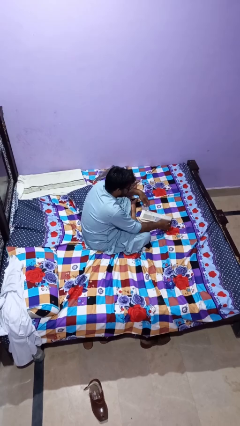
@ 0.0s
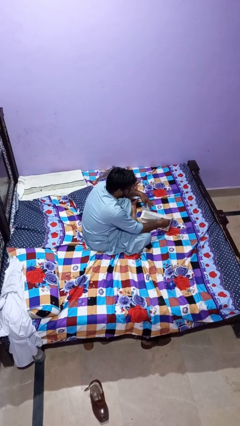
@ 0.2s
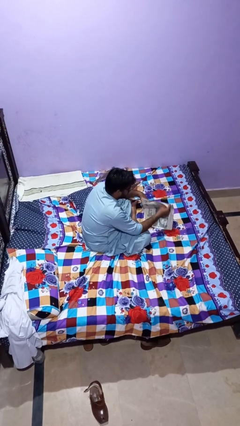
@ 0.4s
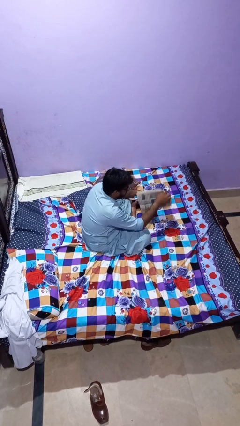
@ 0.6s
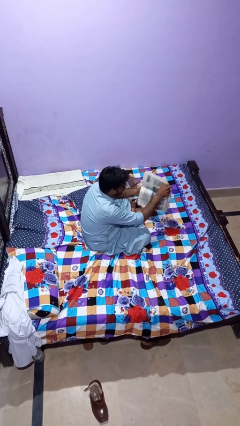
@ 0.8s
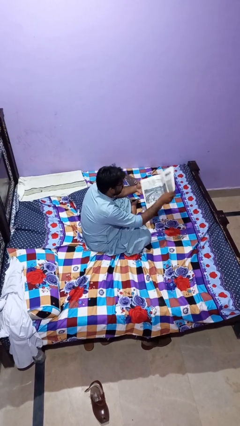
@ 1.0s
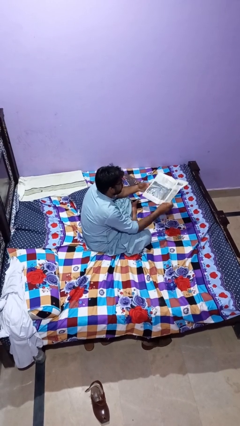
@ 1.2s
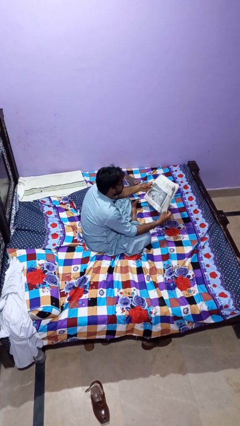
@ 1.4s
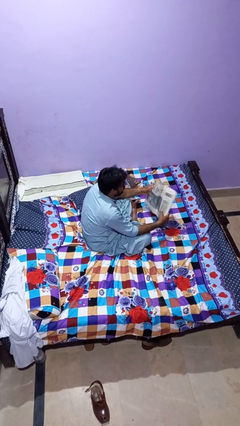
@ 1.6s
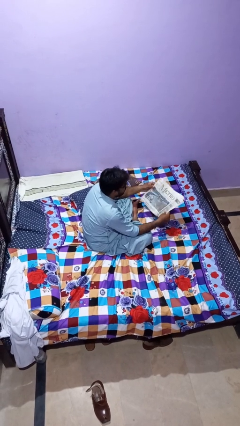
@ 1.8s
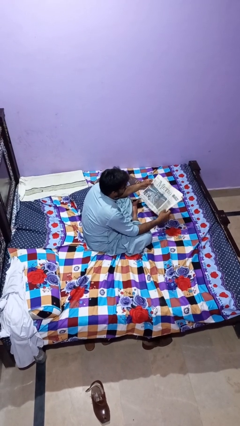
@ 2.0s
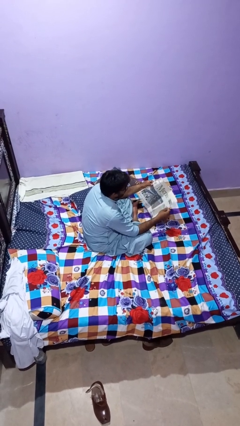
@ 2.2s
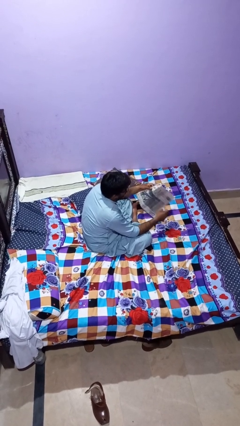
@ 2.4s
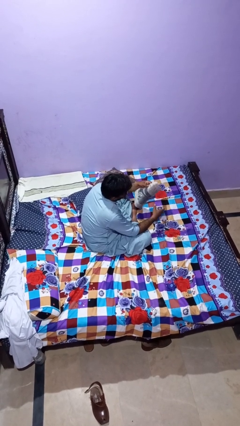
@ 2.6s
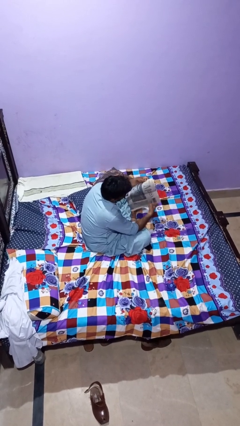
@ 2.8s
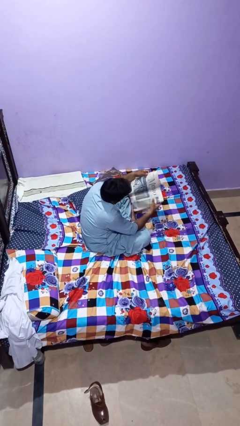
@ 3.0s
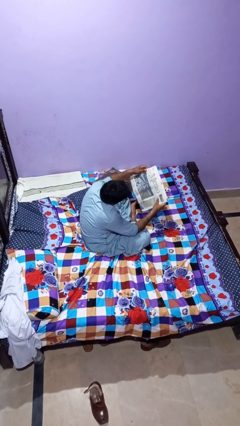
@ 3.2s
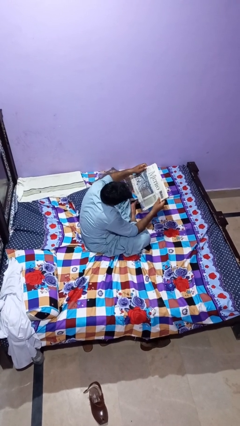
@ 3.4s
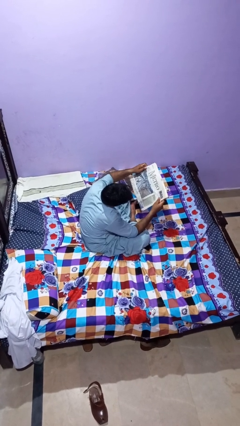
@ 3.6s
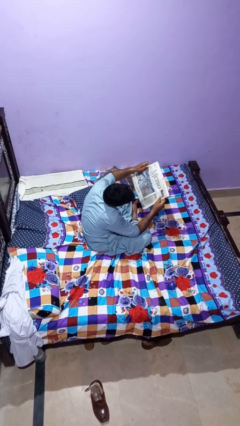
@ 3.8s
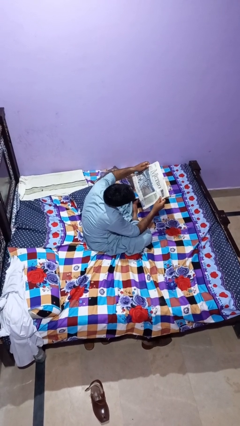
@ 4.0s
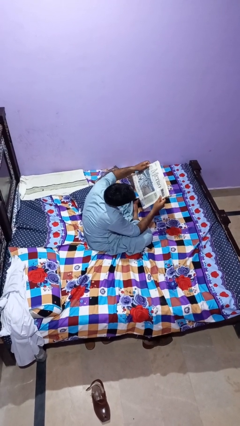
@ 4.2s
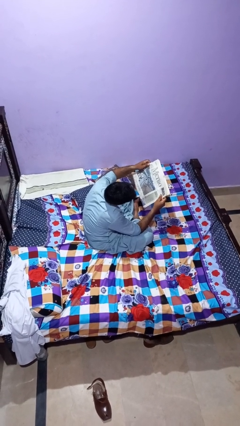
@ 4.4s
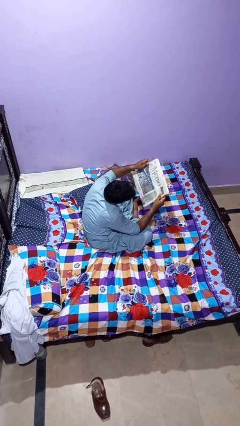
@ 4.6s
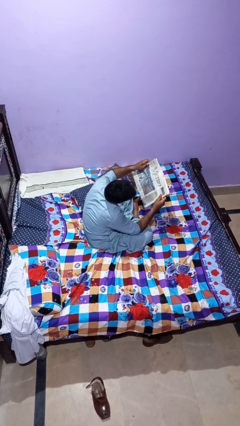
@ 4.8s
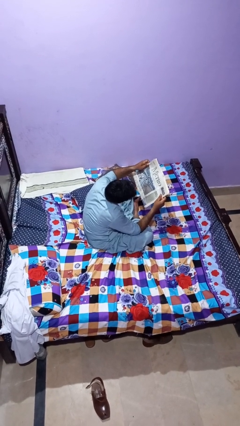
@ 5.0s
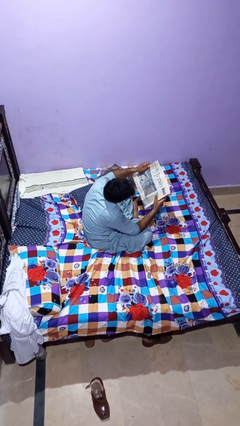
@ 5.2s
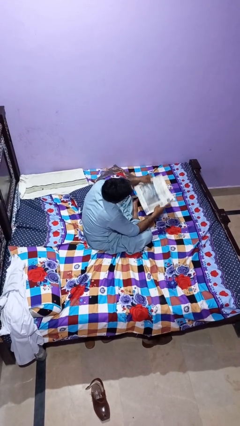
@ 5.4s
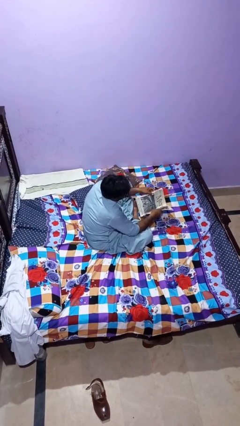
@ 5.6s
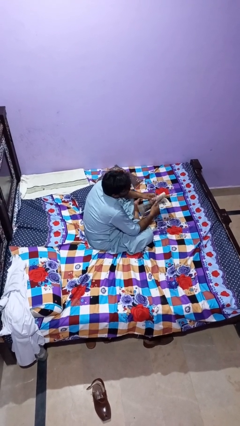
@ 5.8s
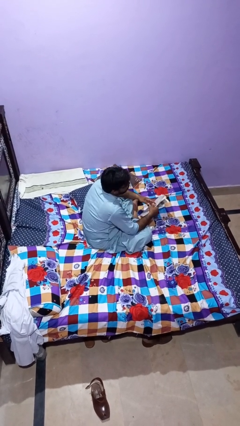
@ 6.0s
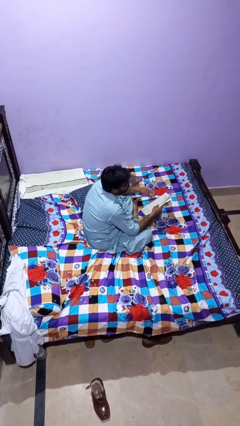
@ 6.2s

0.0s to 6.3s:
person reads newspaper

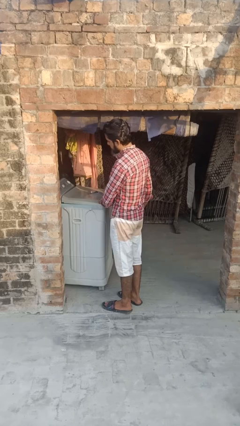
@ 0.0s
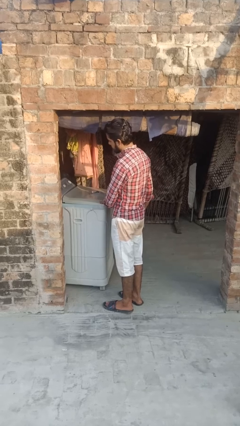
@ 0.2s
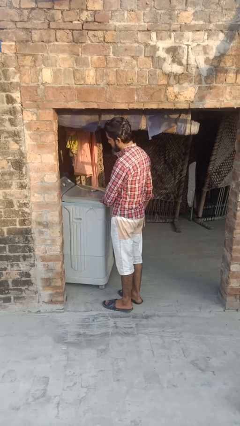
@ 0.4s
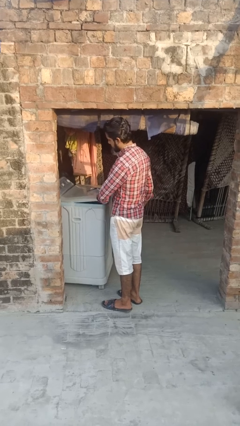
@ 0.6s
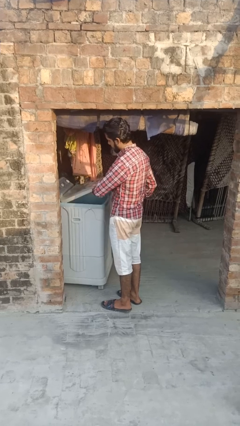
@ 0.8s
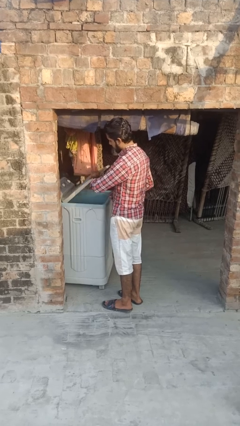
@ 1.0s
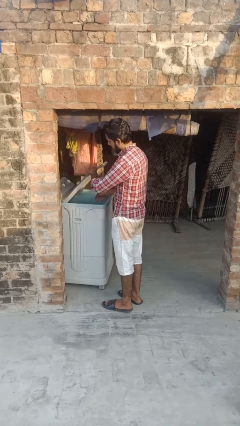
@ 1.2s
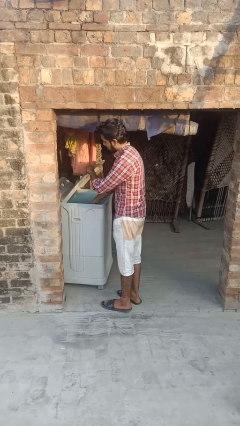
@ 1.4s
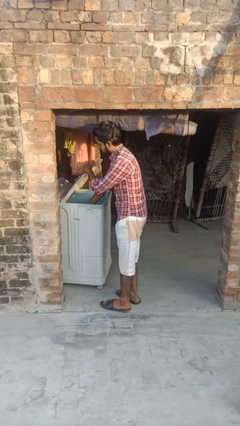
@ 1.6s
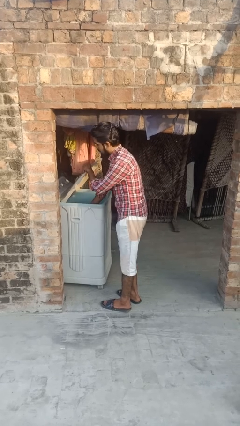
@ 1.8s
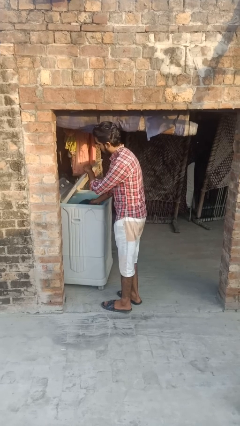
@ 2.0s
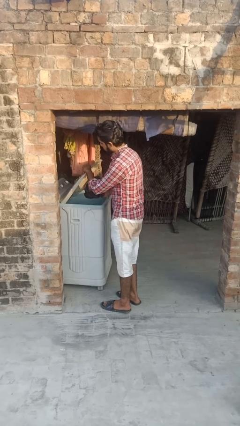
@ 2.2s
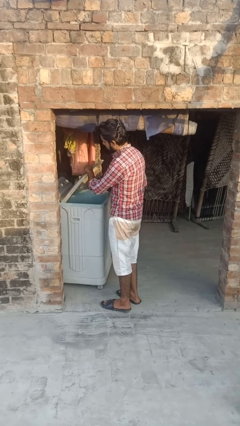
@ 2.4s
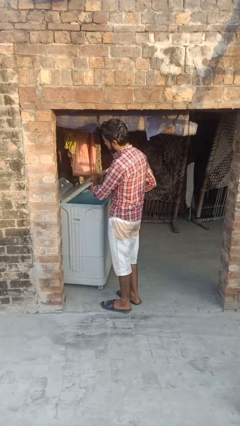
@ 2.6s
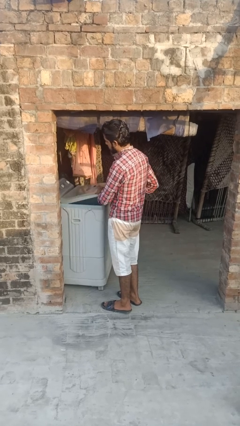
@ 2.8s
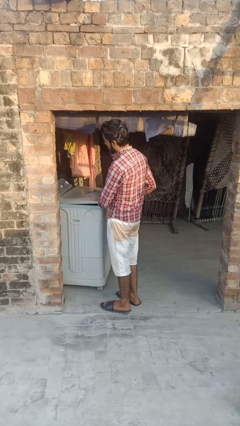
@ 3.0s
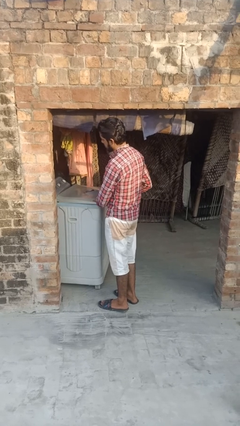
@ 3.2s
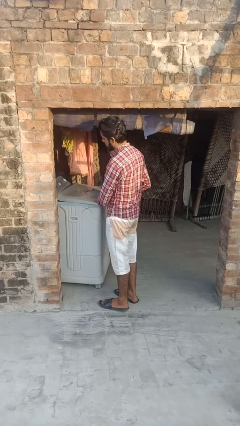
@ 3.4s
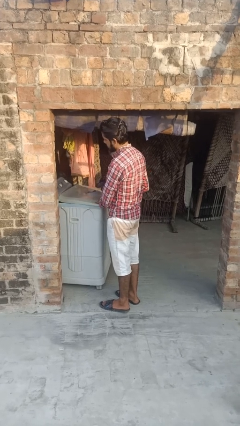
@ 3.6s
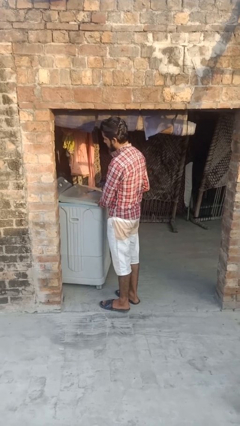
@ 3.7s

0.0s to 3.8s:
person unloads clotheswasher

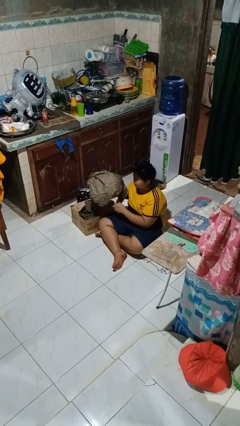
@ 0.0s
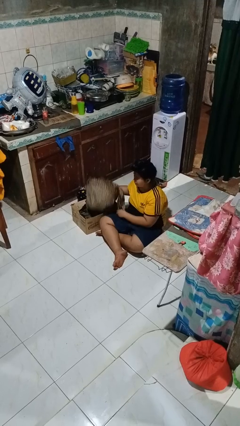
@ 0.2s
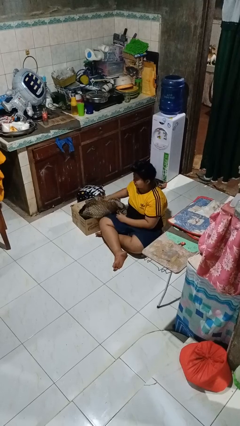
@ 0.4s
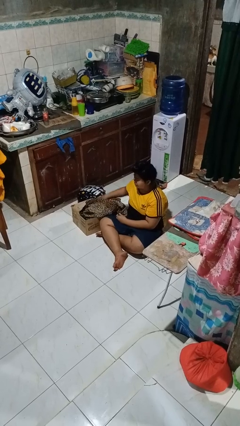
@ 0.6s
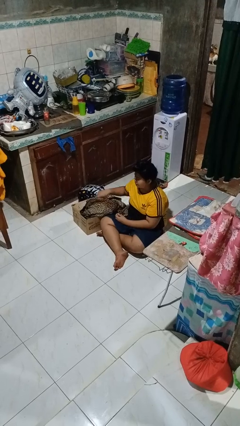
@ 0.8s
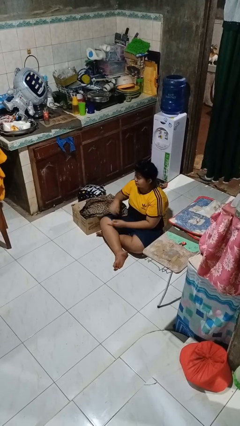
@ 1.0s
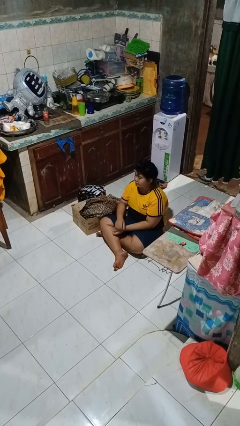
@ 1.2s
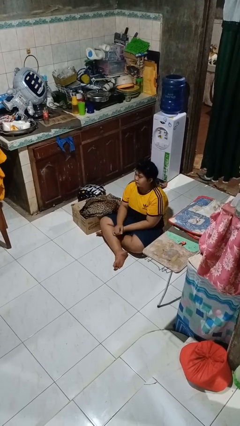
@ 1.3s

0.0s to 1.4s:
person puts object into box

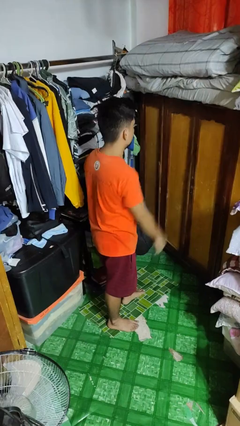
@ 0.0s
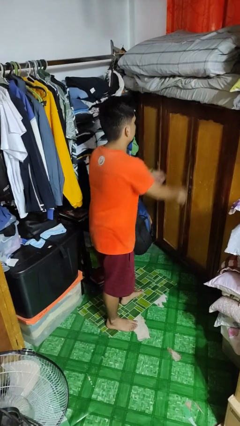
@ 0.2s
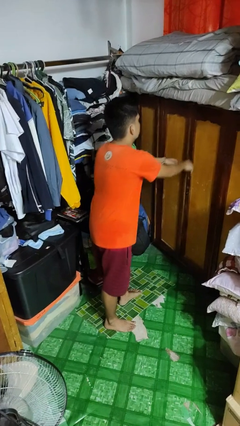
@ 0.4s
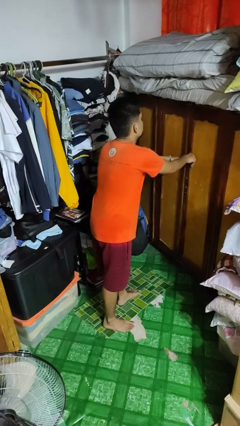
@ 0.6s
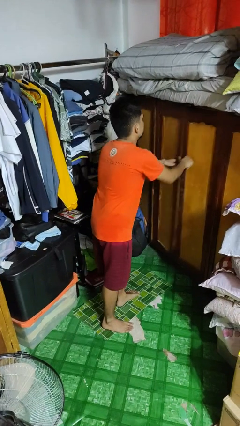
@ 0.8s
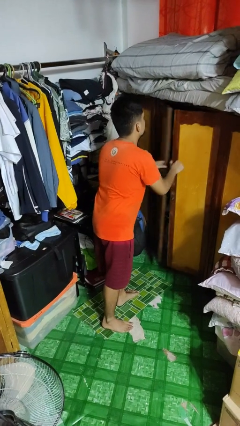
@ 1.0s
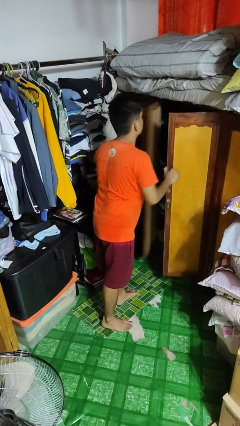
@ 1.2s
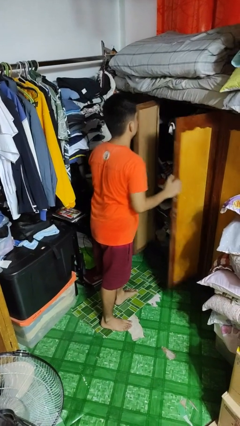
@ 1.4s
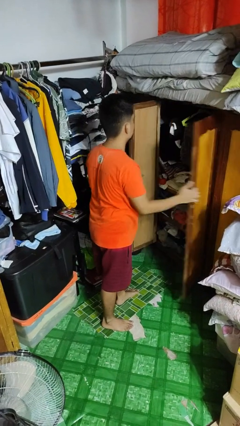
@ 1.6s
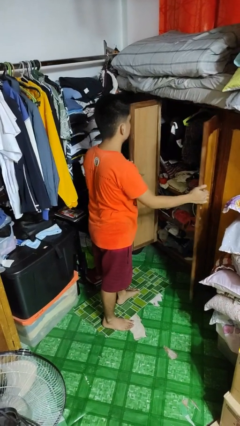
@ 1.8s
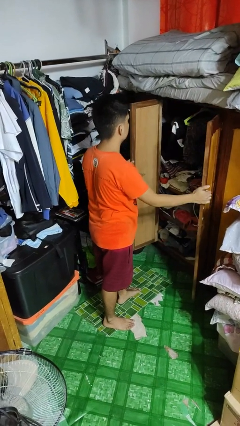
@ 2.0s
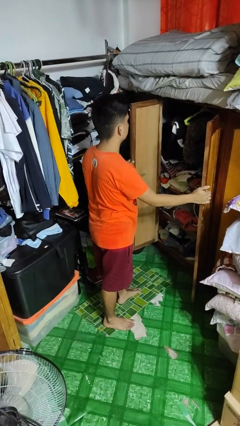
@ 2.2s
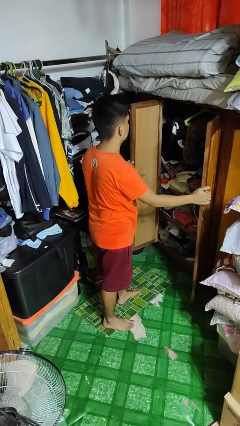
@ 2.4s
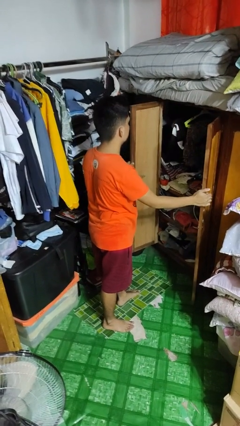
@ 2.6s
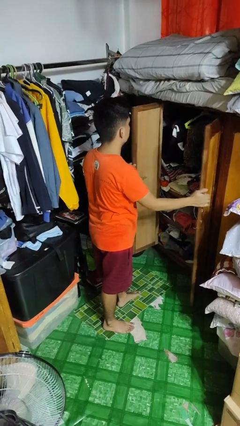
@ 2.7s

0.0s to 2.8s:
person opens closet door

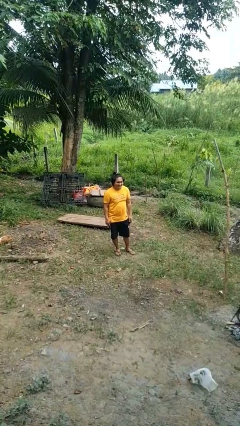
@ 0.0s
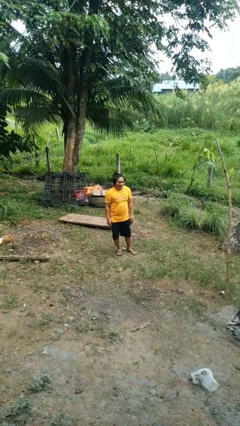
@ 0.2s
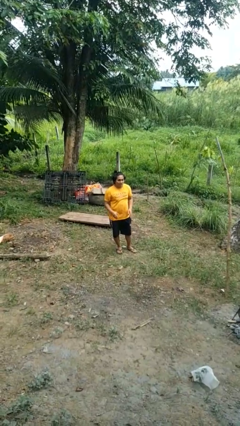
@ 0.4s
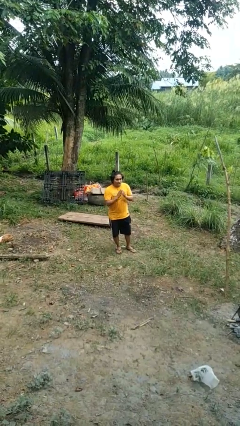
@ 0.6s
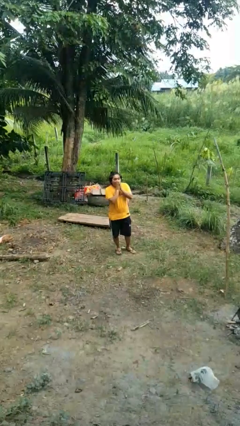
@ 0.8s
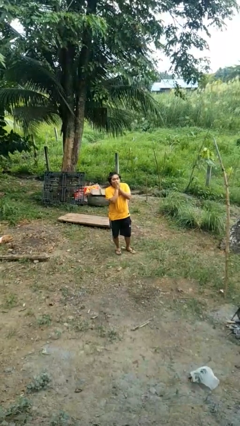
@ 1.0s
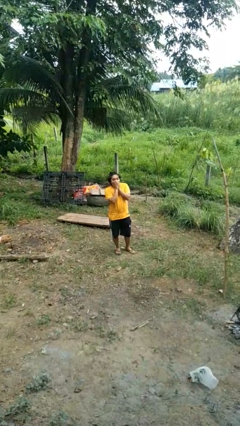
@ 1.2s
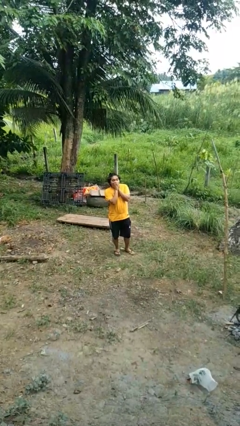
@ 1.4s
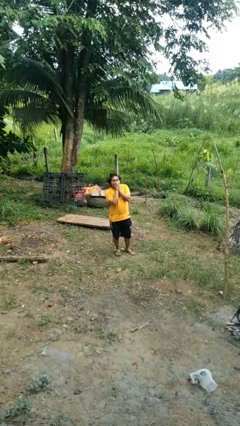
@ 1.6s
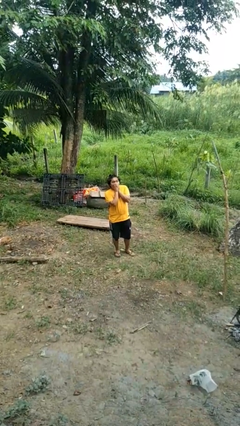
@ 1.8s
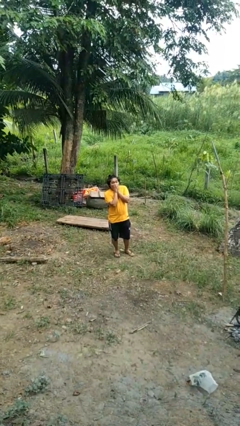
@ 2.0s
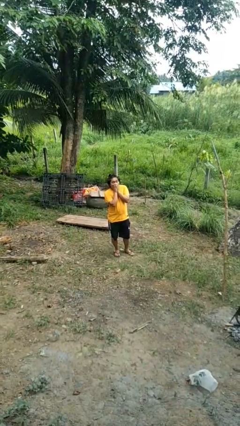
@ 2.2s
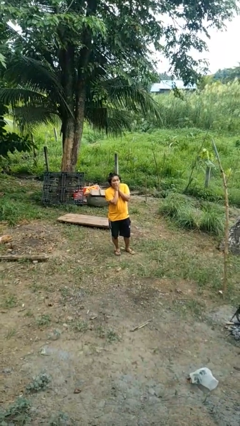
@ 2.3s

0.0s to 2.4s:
person covers face with hands

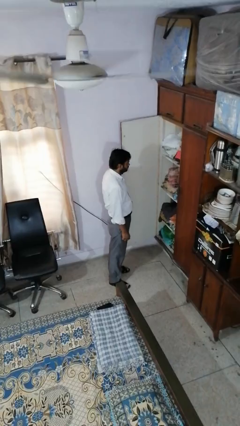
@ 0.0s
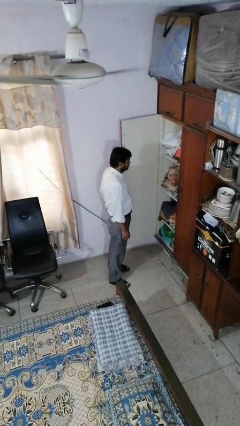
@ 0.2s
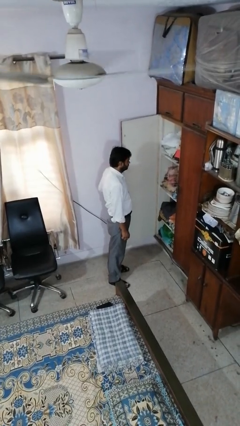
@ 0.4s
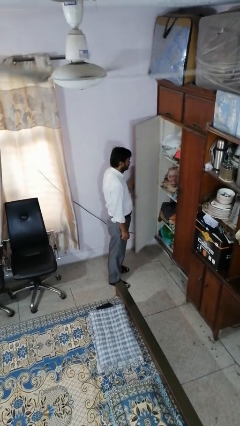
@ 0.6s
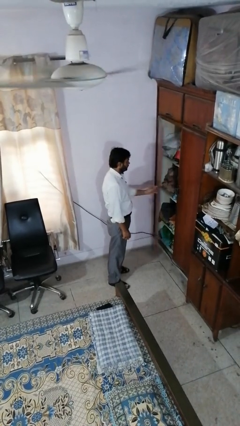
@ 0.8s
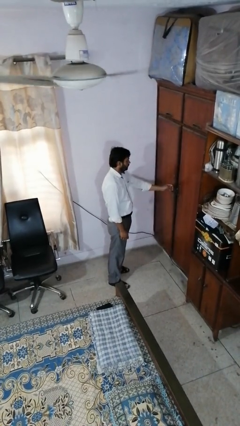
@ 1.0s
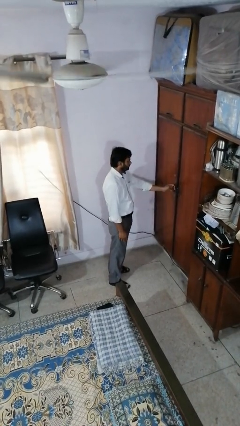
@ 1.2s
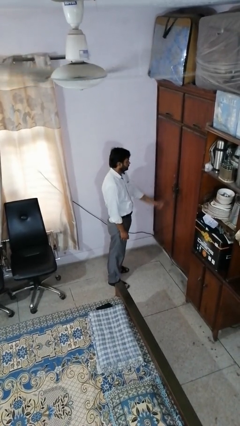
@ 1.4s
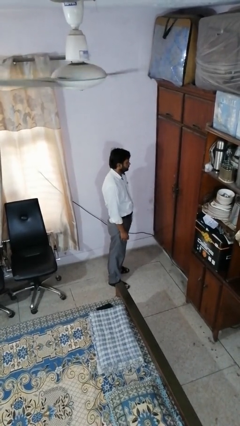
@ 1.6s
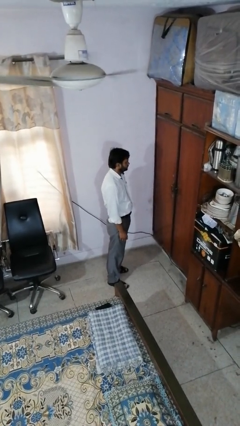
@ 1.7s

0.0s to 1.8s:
person closes closet door
